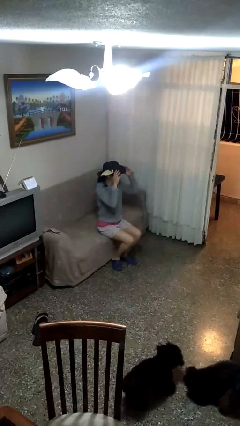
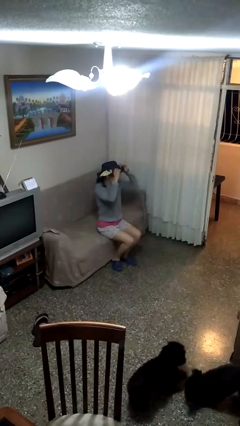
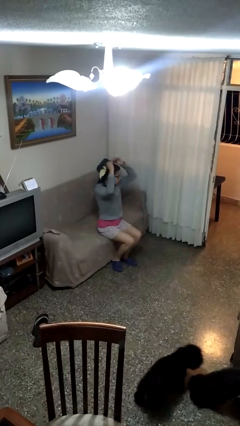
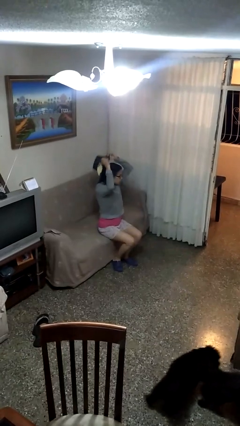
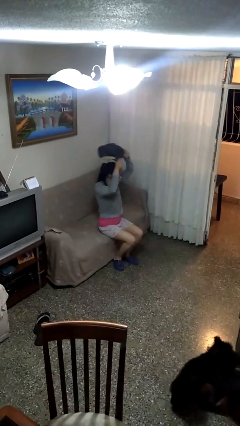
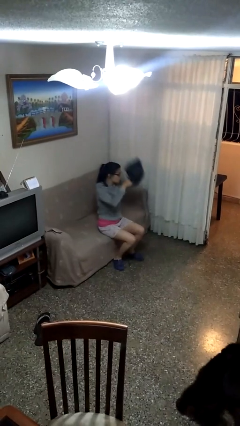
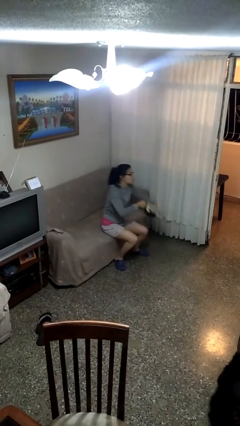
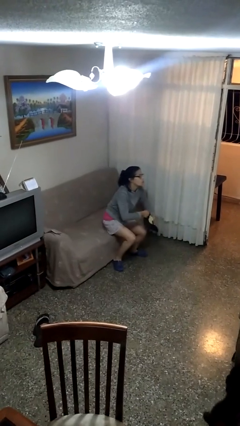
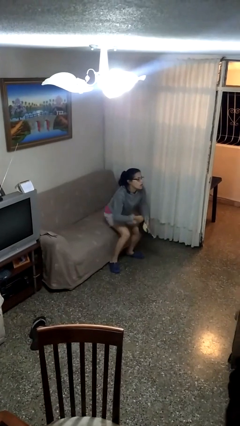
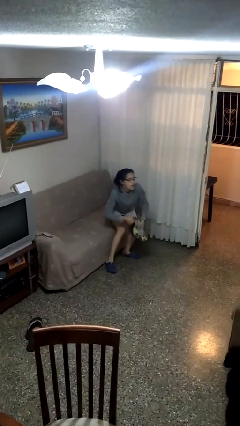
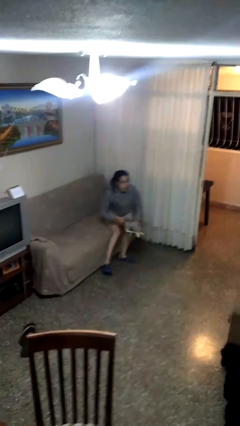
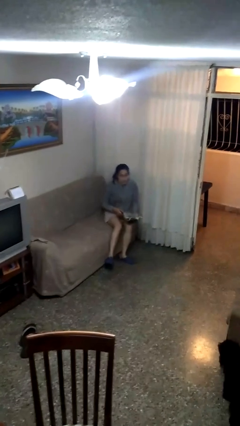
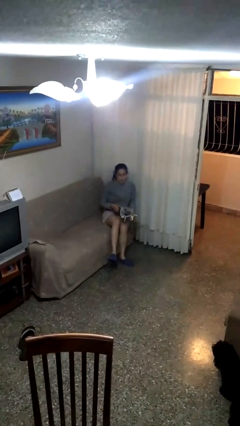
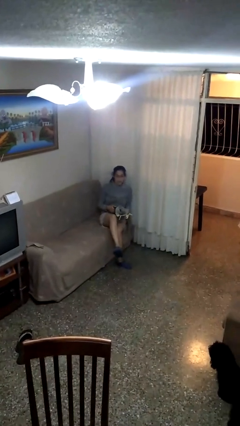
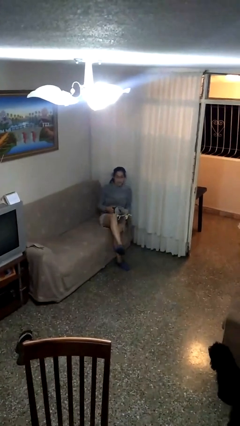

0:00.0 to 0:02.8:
person takes off hat

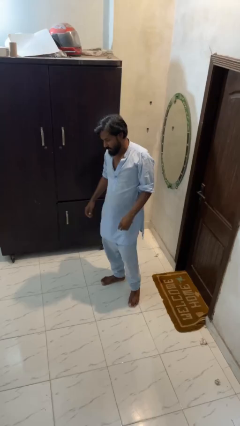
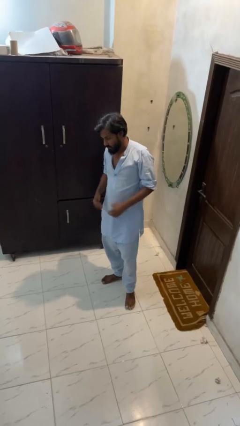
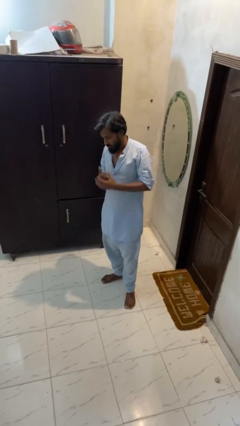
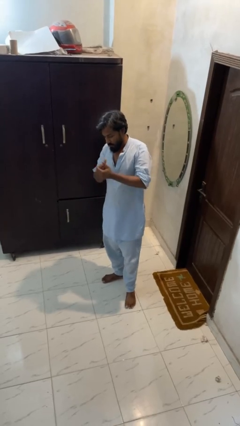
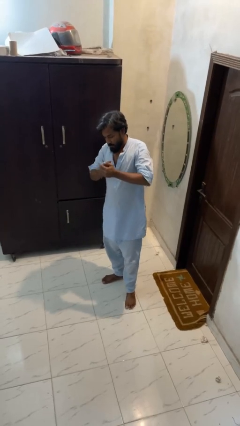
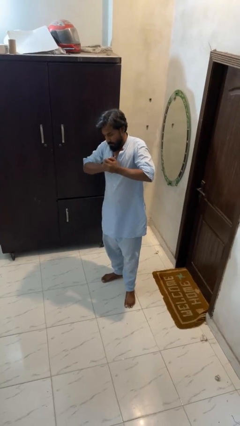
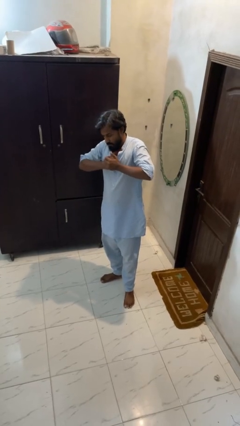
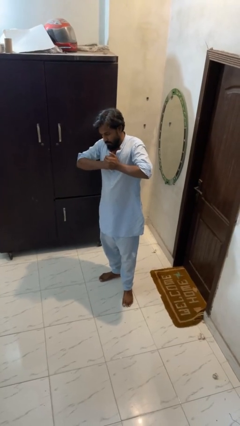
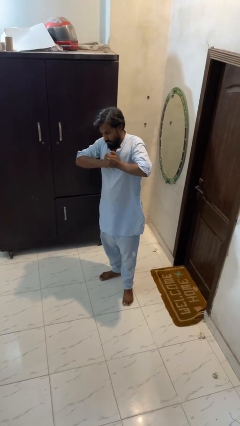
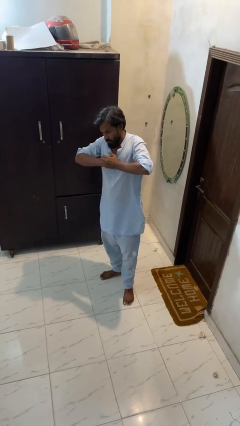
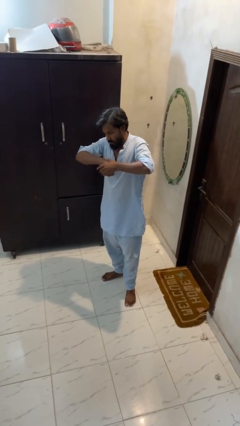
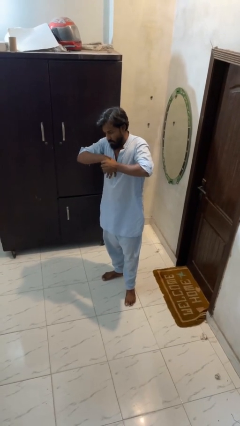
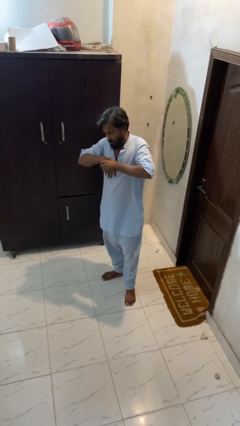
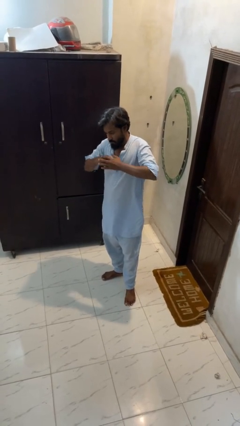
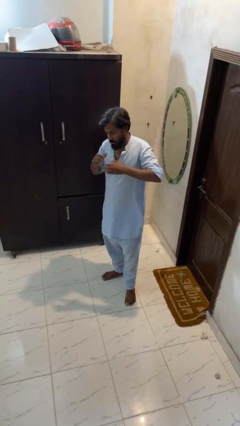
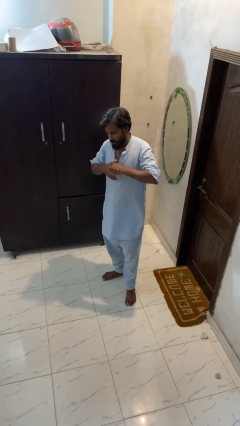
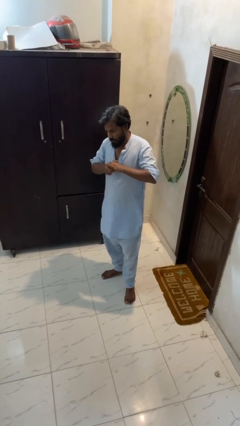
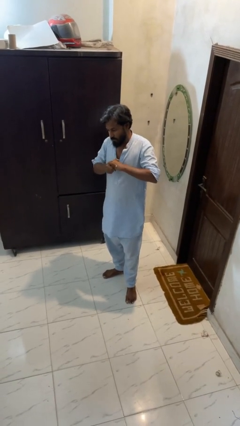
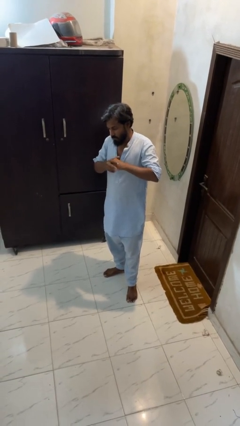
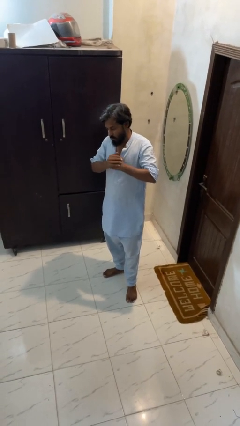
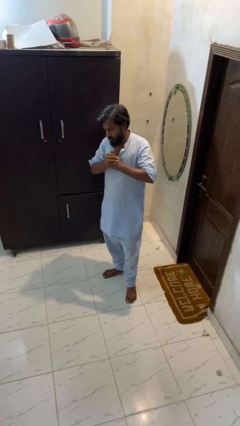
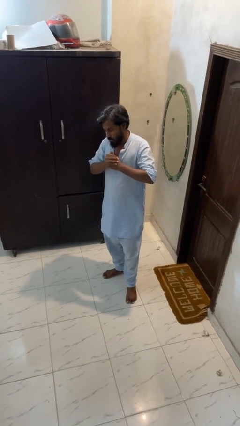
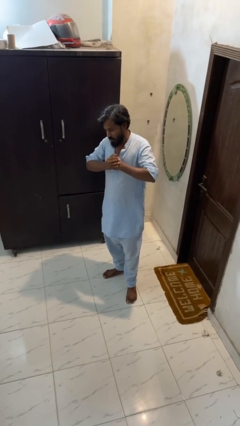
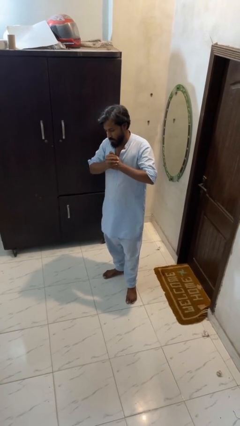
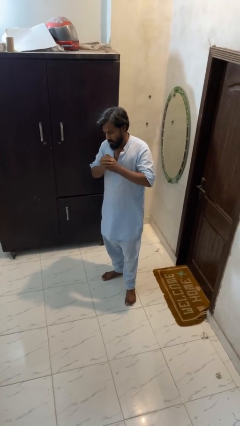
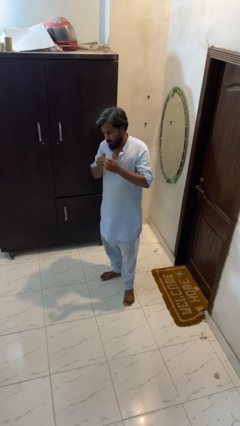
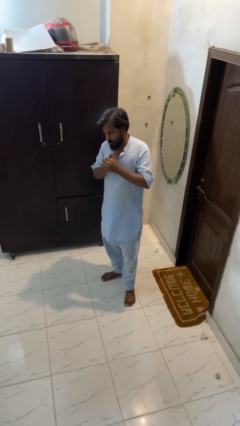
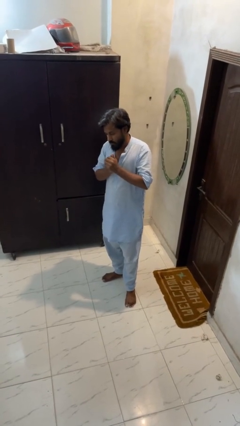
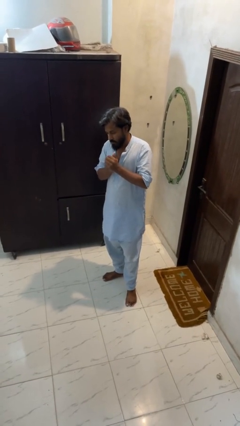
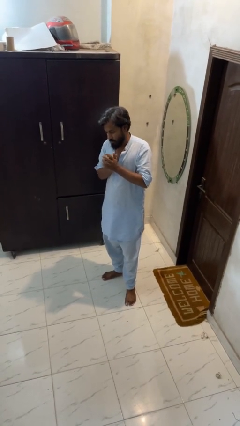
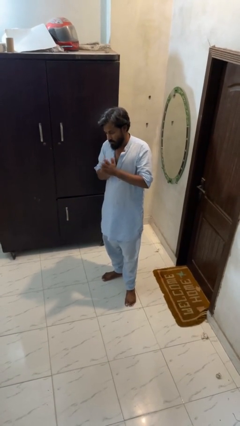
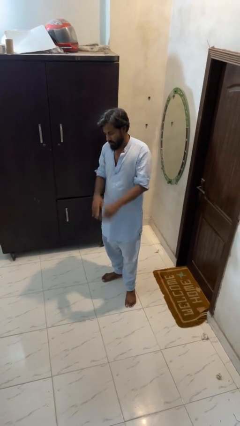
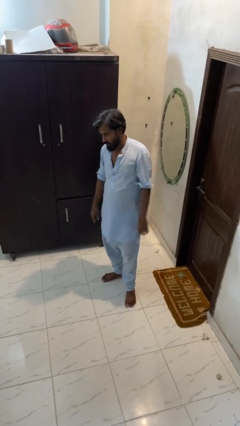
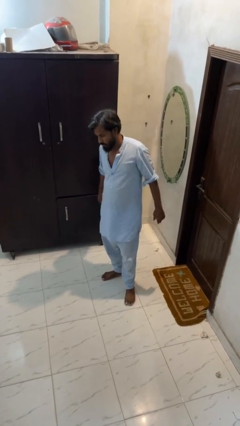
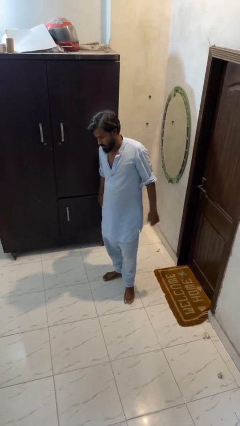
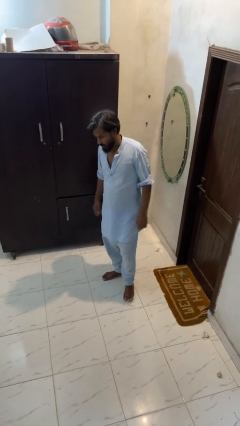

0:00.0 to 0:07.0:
person cracks knuckles

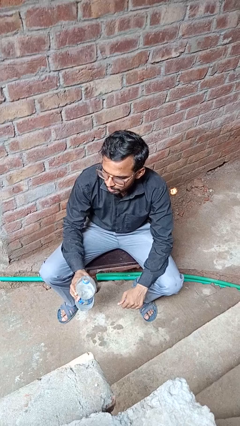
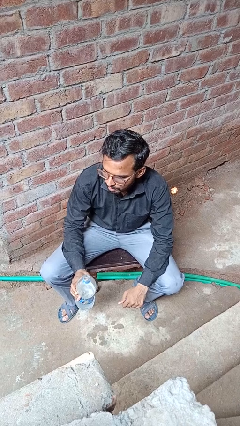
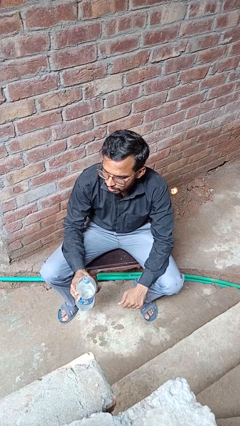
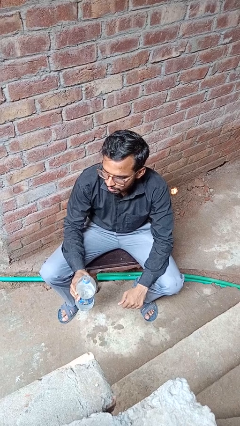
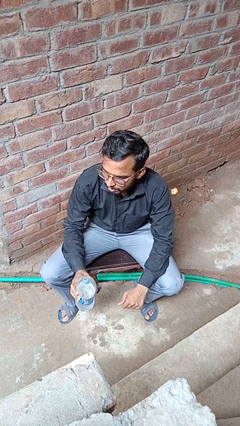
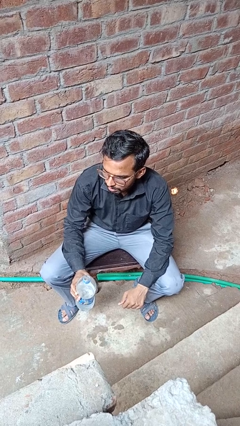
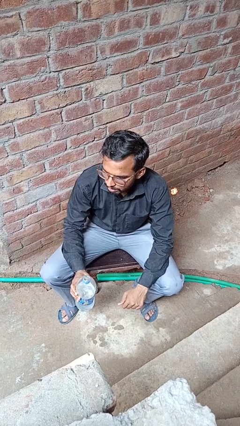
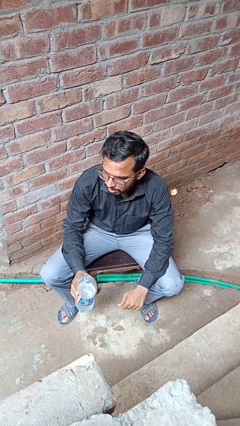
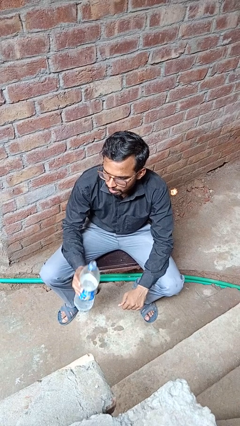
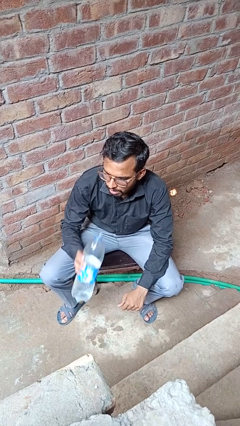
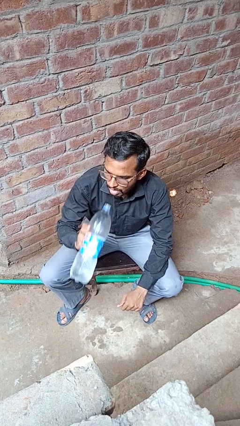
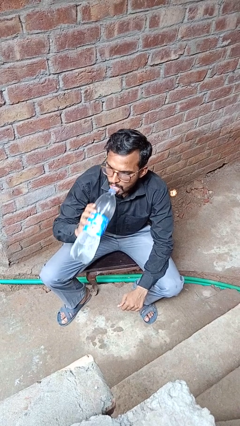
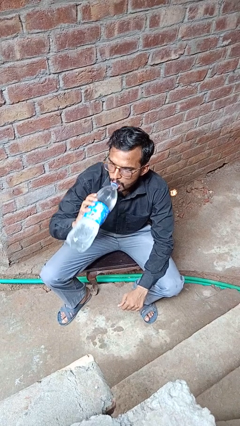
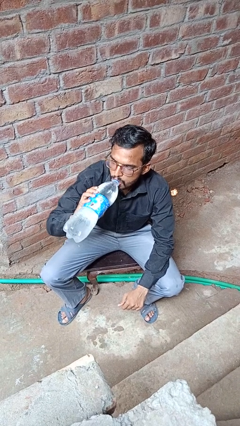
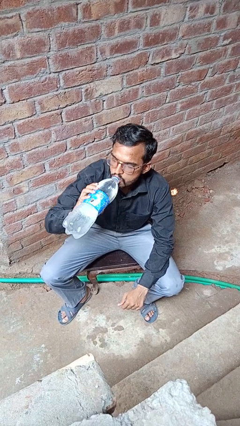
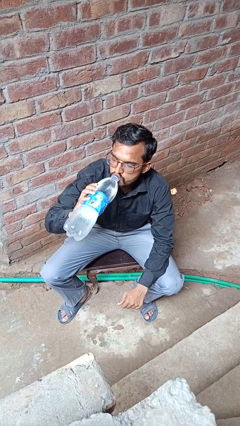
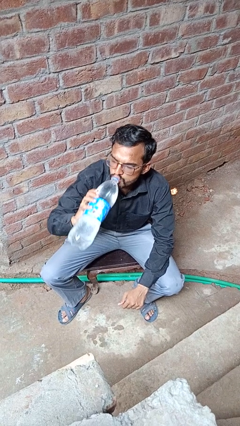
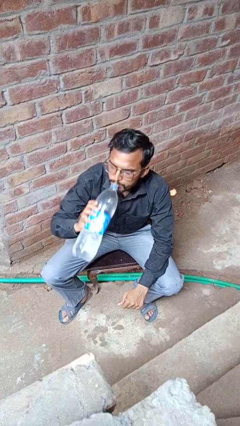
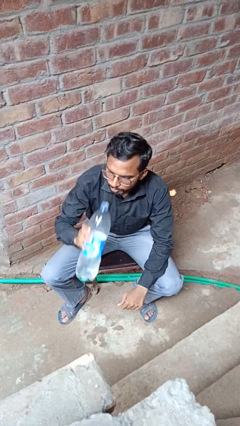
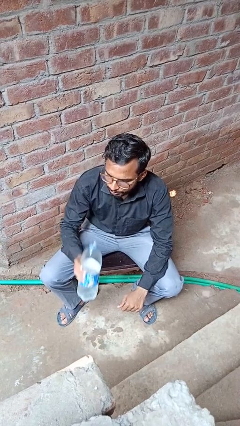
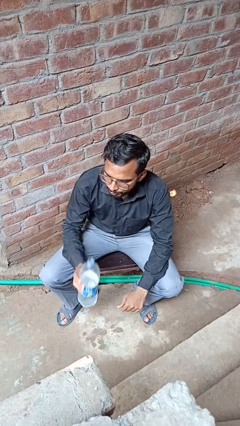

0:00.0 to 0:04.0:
person drinks from bottle

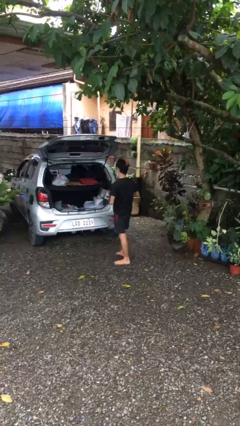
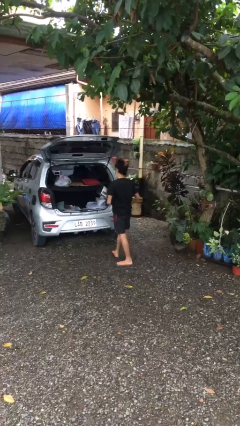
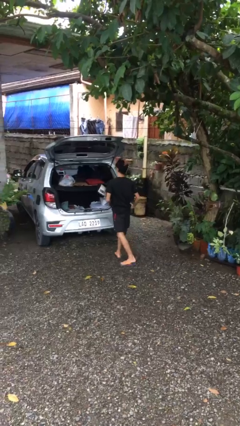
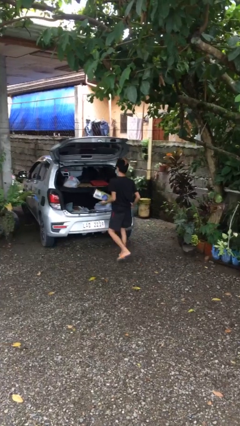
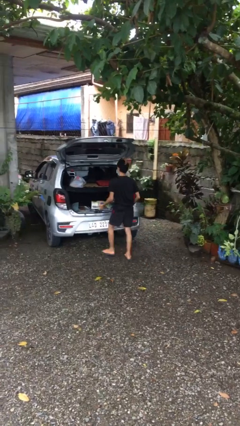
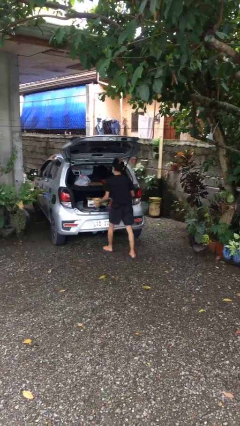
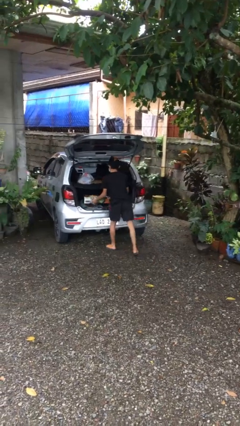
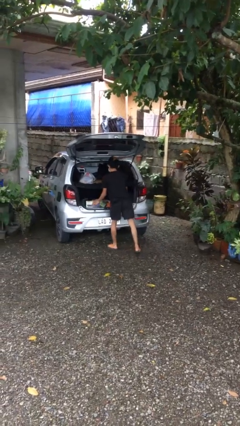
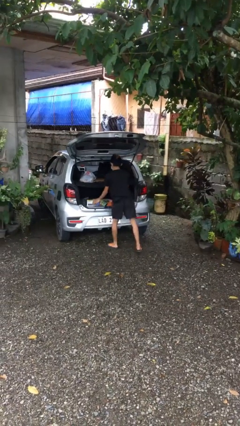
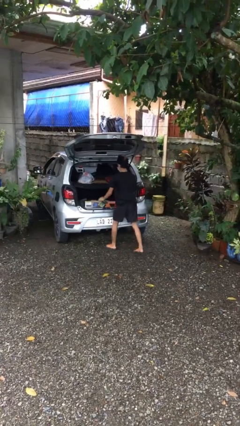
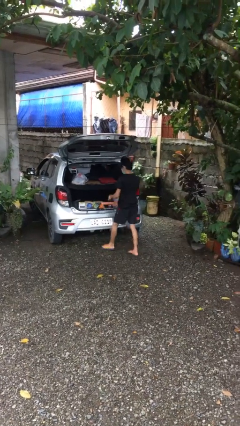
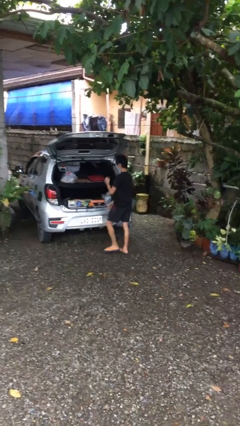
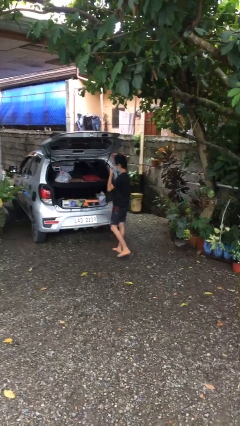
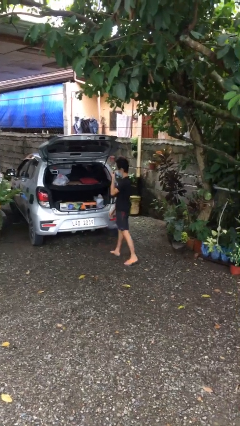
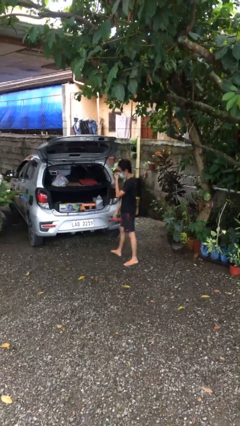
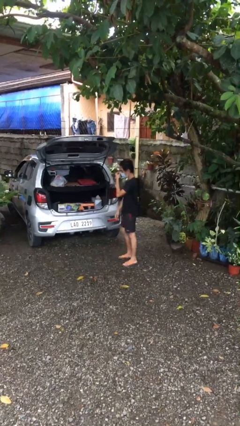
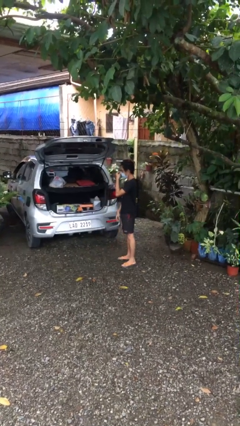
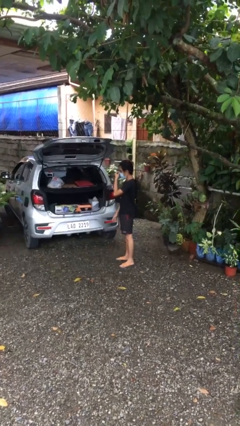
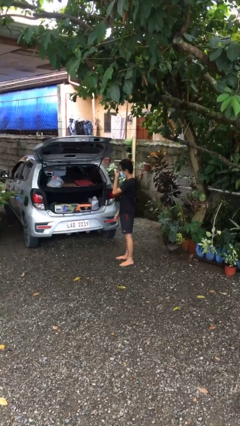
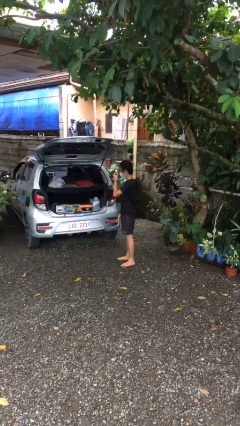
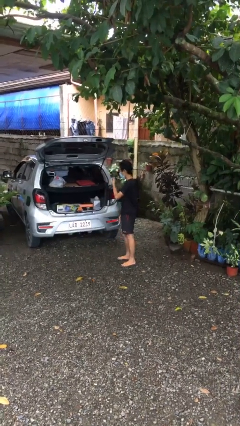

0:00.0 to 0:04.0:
person loads car
